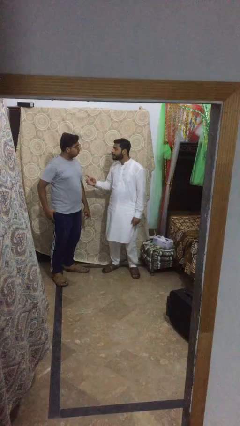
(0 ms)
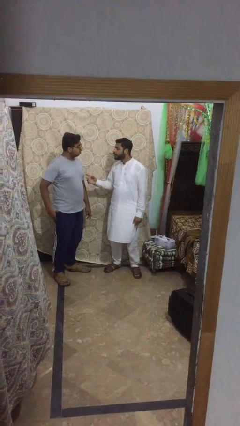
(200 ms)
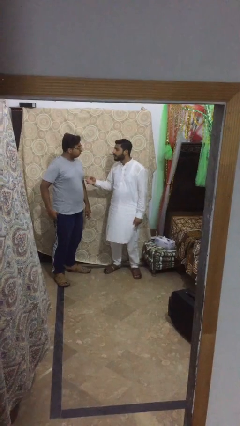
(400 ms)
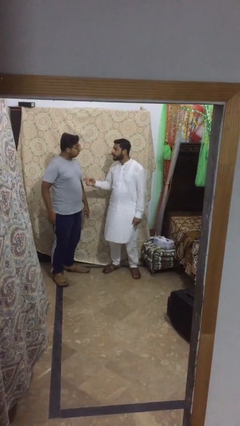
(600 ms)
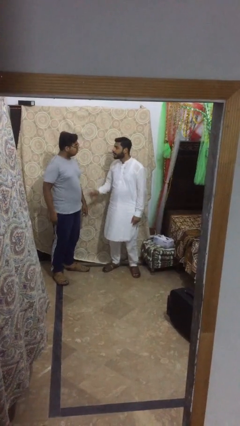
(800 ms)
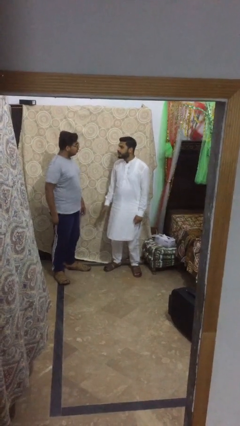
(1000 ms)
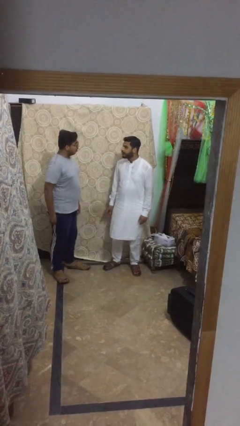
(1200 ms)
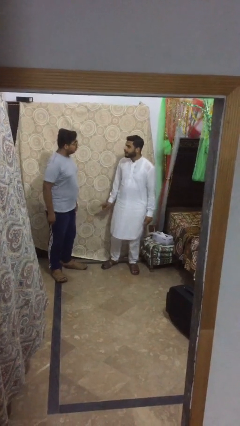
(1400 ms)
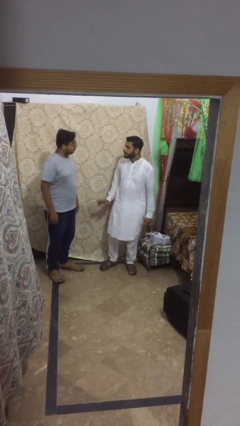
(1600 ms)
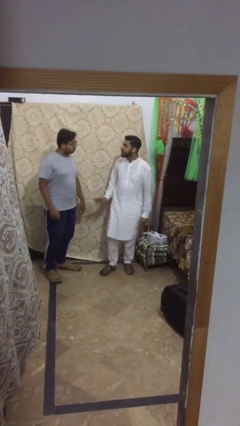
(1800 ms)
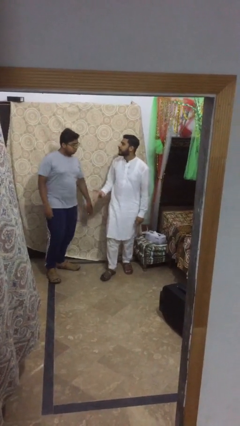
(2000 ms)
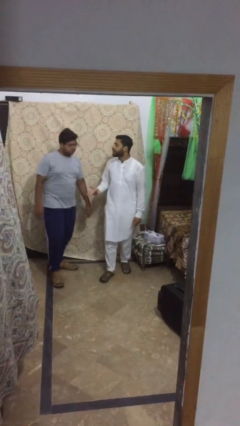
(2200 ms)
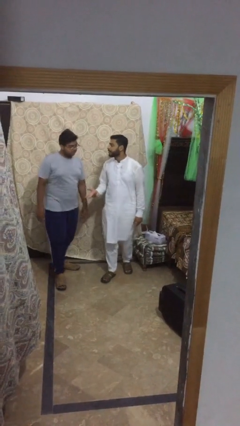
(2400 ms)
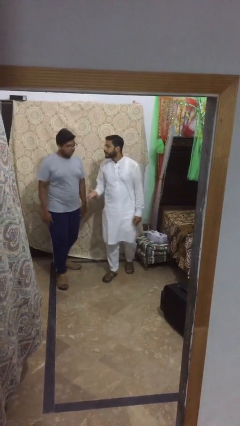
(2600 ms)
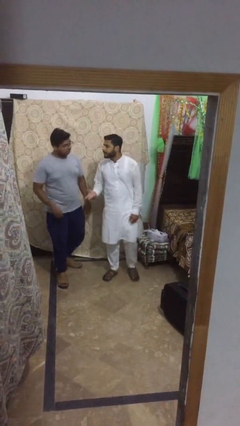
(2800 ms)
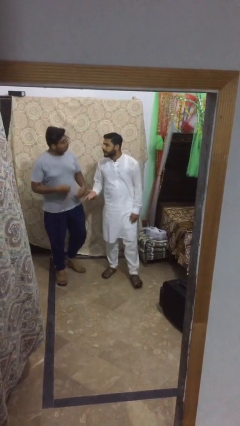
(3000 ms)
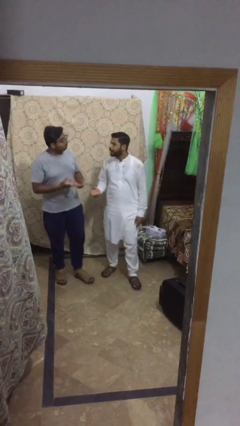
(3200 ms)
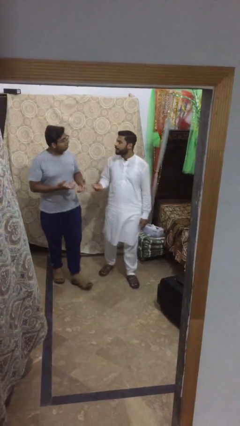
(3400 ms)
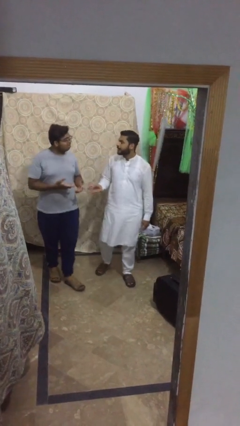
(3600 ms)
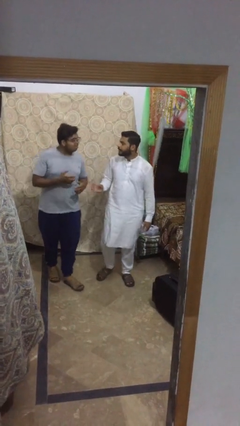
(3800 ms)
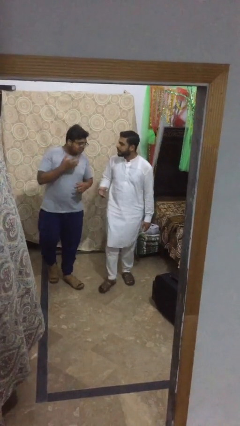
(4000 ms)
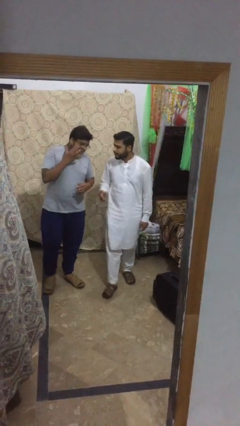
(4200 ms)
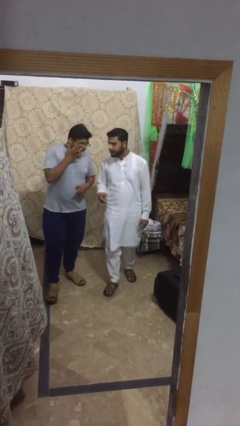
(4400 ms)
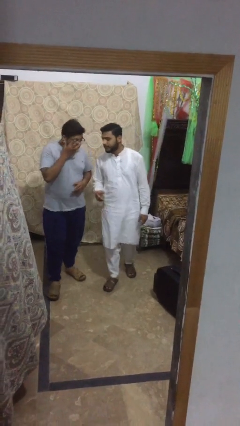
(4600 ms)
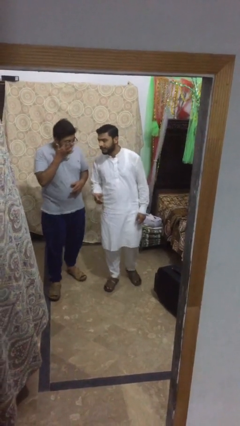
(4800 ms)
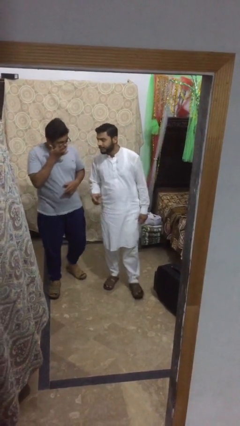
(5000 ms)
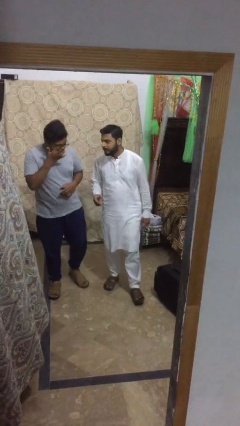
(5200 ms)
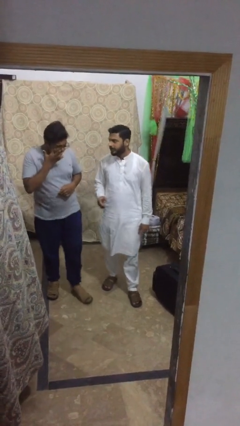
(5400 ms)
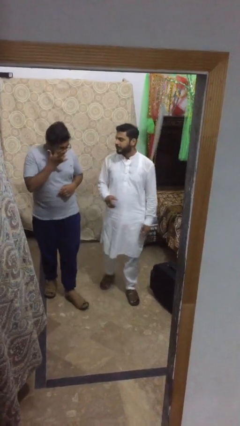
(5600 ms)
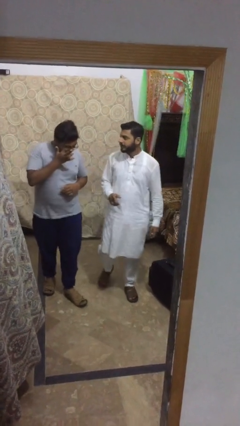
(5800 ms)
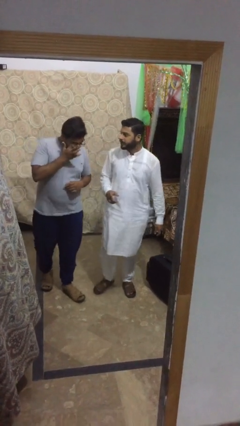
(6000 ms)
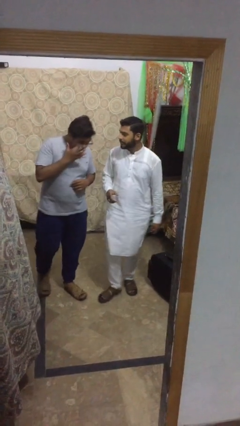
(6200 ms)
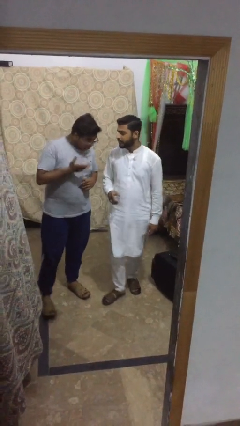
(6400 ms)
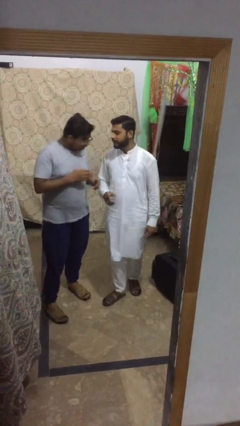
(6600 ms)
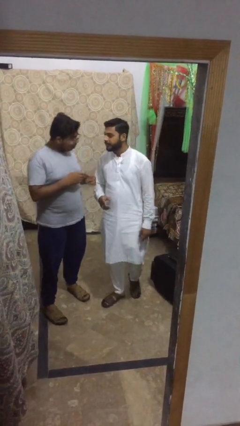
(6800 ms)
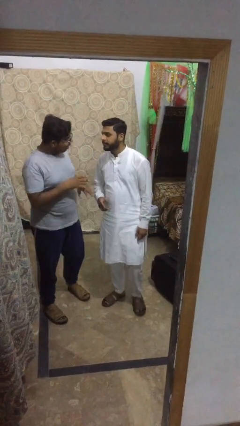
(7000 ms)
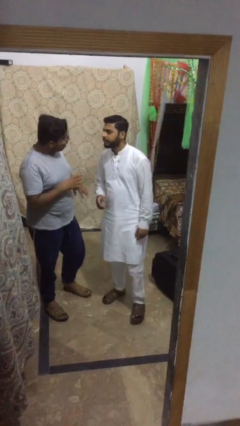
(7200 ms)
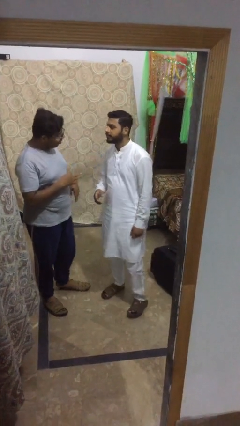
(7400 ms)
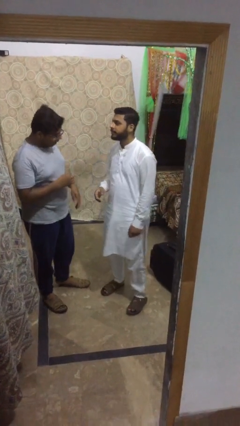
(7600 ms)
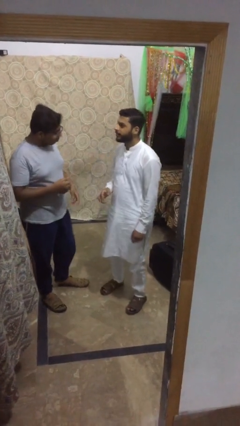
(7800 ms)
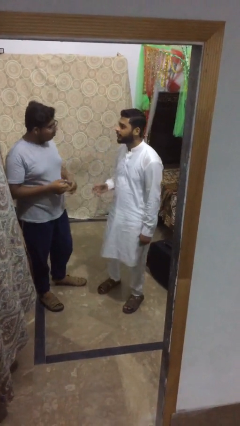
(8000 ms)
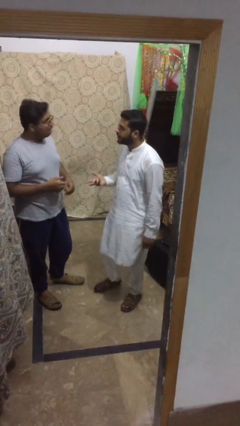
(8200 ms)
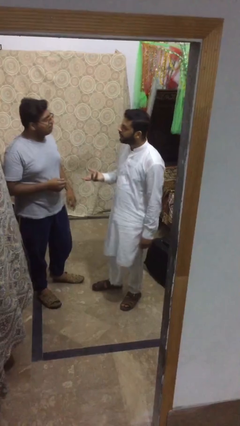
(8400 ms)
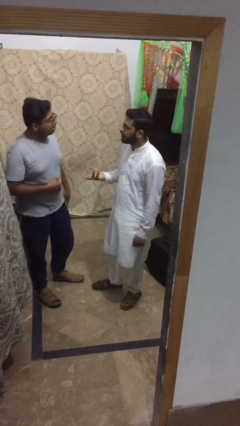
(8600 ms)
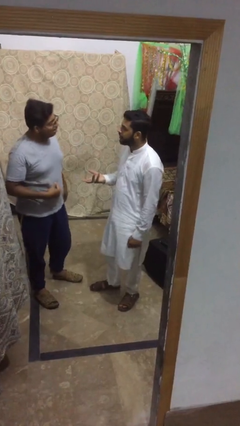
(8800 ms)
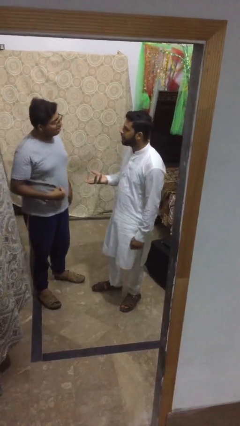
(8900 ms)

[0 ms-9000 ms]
person talks to person

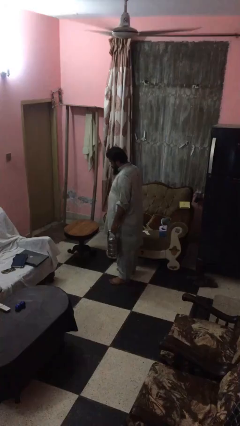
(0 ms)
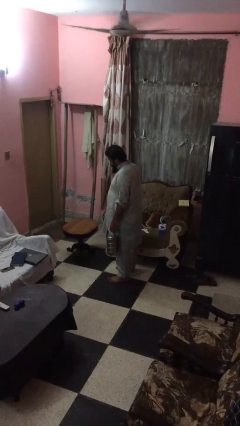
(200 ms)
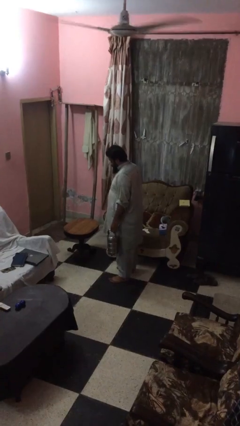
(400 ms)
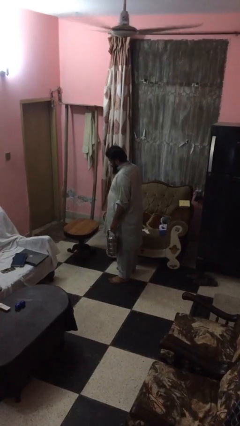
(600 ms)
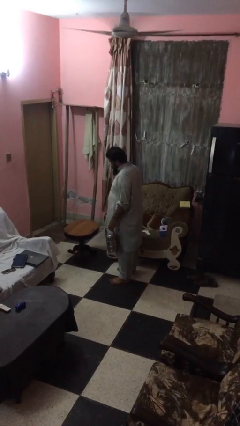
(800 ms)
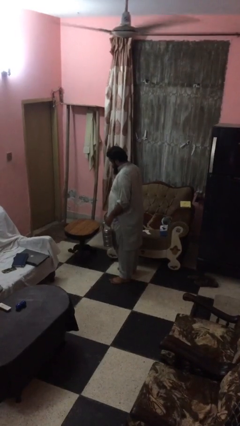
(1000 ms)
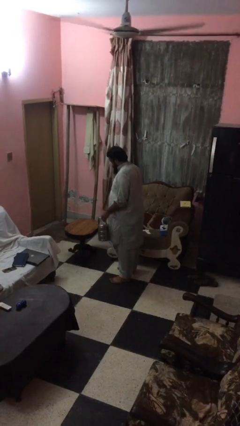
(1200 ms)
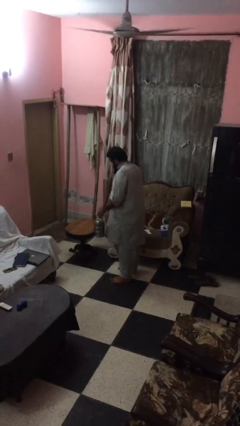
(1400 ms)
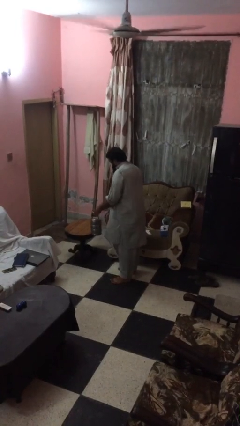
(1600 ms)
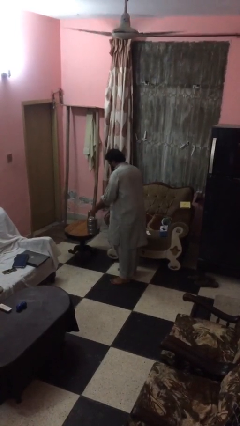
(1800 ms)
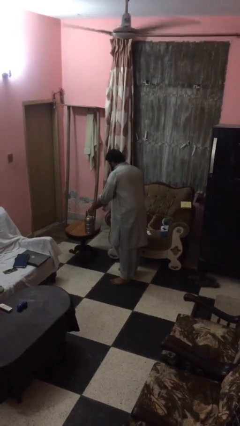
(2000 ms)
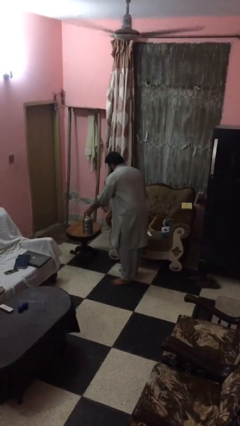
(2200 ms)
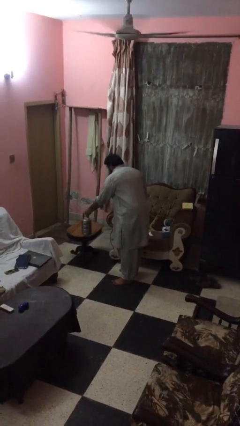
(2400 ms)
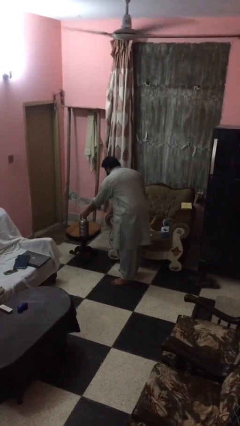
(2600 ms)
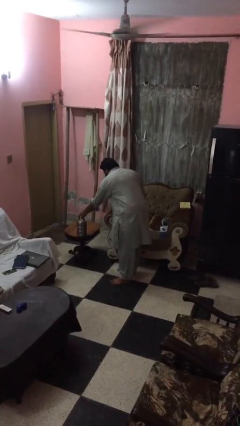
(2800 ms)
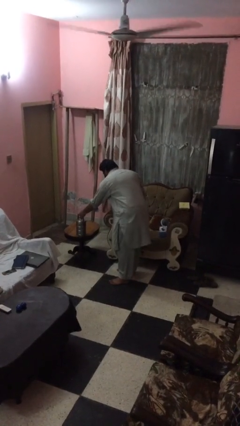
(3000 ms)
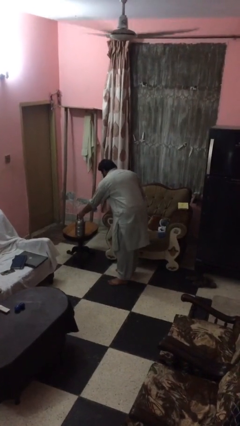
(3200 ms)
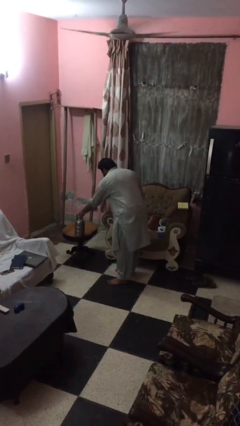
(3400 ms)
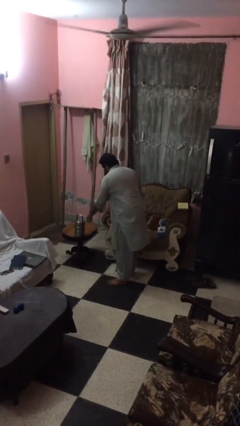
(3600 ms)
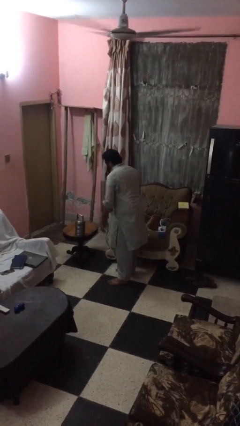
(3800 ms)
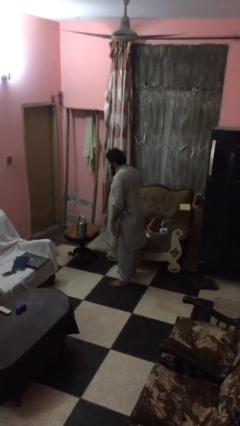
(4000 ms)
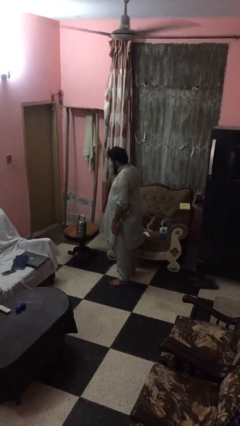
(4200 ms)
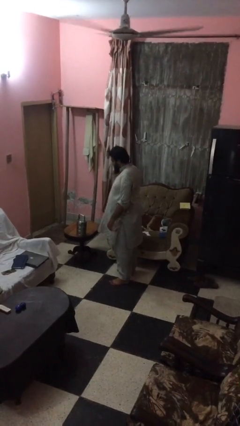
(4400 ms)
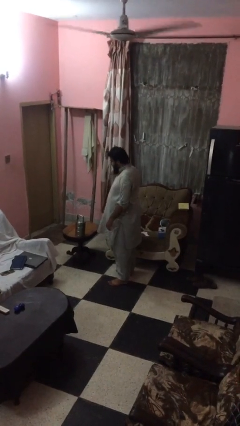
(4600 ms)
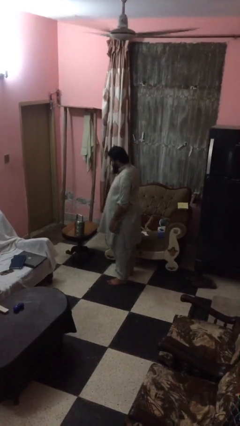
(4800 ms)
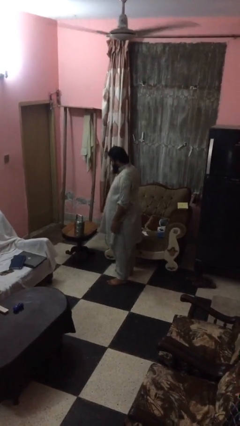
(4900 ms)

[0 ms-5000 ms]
person puts down object on table

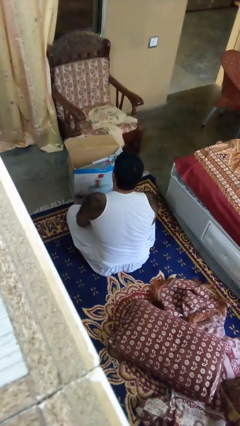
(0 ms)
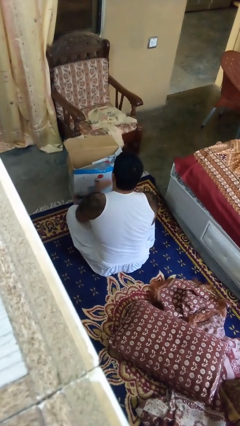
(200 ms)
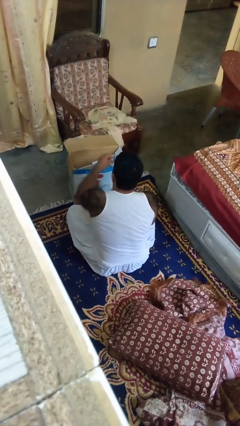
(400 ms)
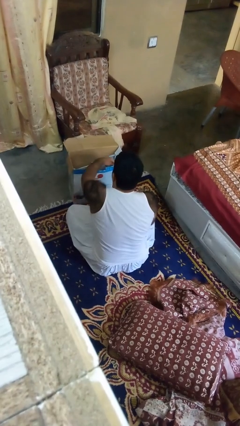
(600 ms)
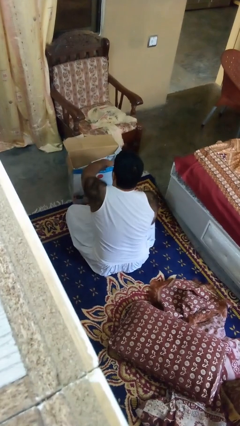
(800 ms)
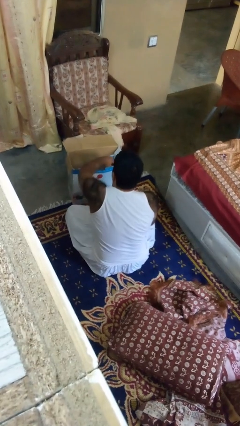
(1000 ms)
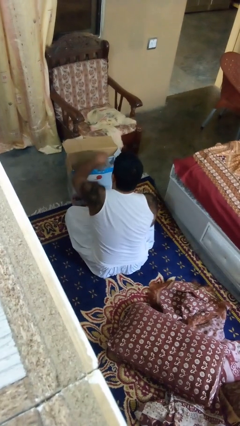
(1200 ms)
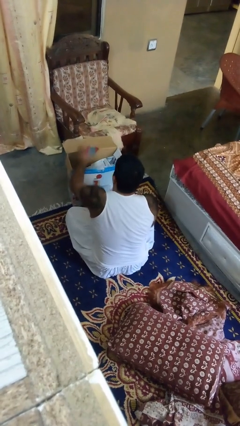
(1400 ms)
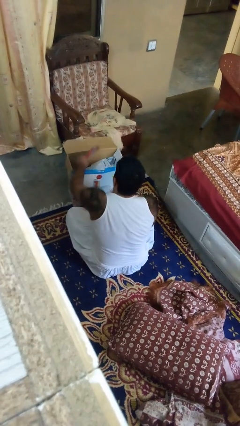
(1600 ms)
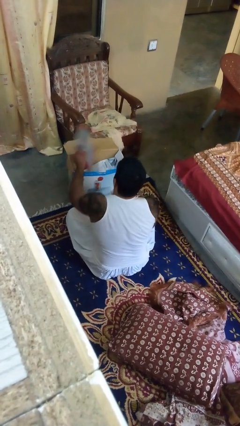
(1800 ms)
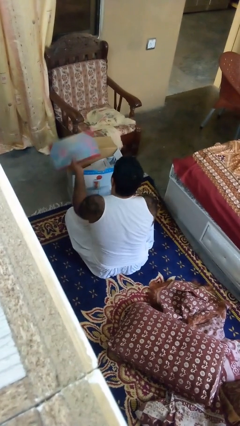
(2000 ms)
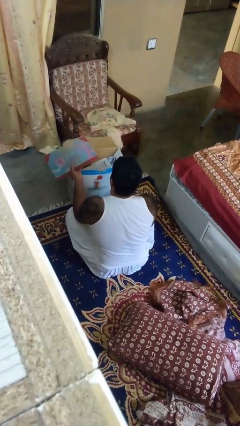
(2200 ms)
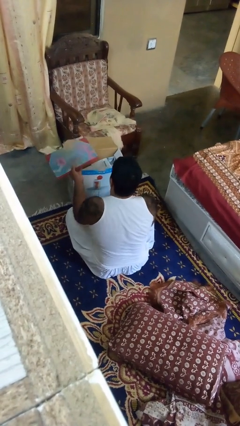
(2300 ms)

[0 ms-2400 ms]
person takes object from box

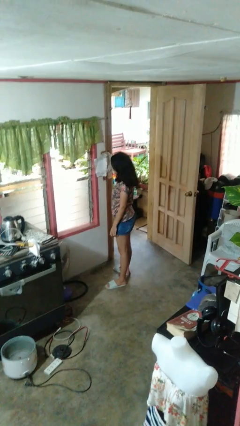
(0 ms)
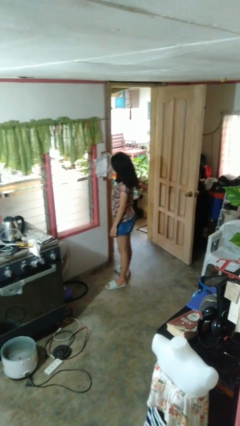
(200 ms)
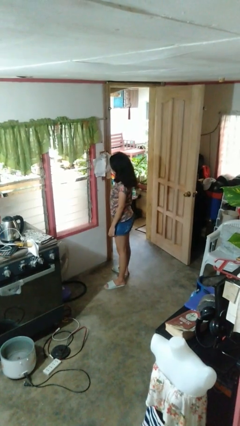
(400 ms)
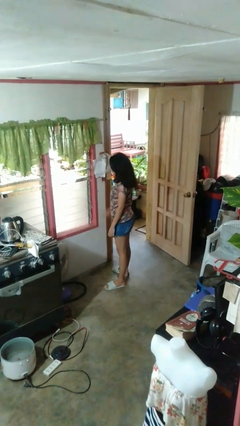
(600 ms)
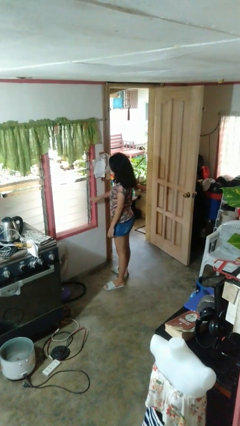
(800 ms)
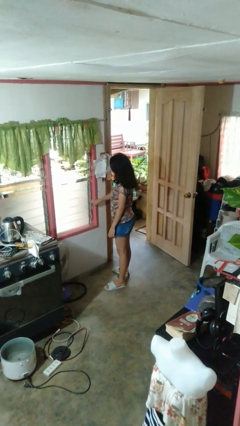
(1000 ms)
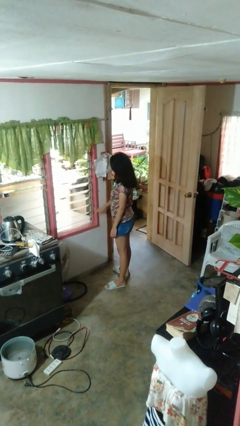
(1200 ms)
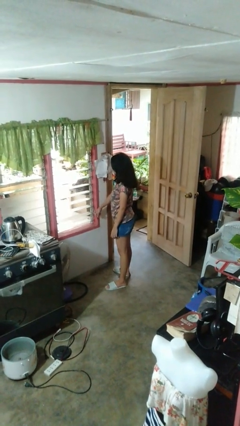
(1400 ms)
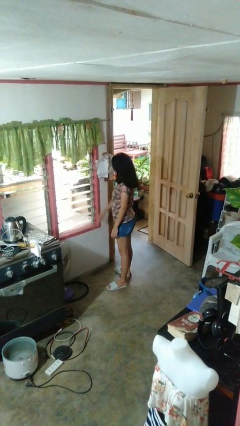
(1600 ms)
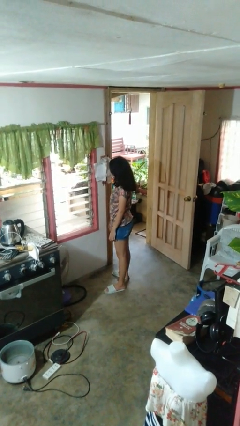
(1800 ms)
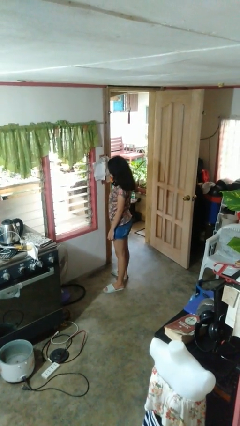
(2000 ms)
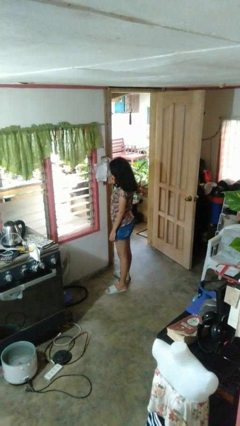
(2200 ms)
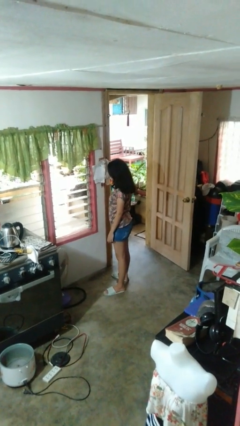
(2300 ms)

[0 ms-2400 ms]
person opens home window
